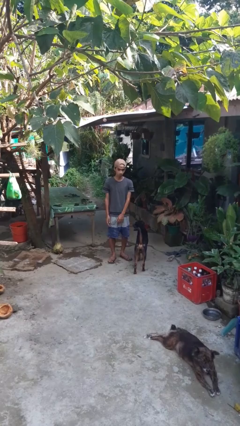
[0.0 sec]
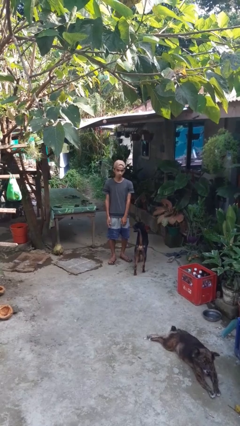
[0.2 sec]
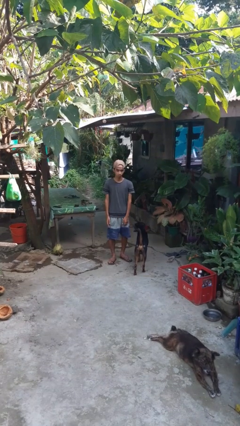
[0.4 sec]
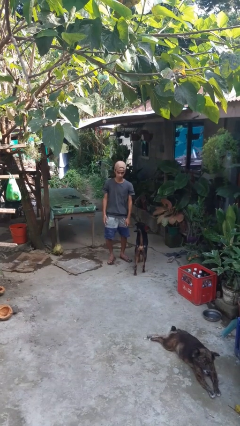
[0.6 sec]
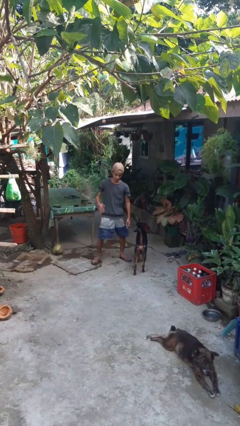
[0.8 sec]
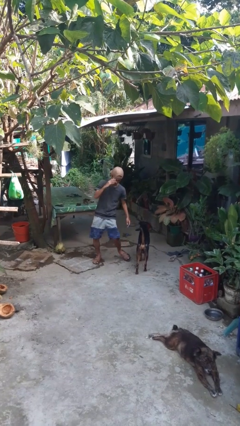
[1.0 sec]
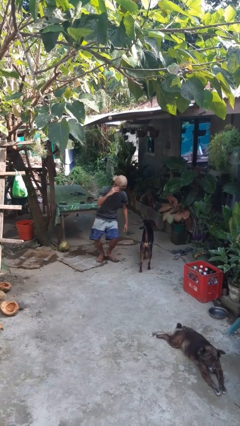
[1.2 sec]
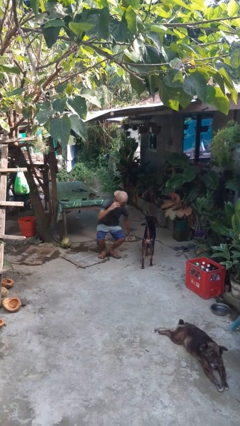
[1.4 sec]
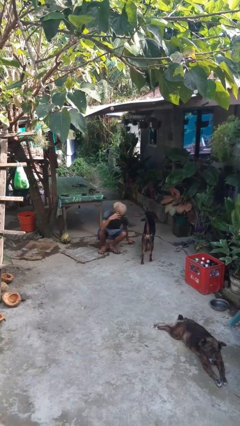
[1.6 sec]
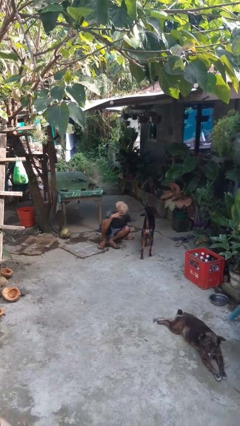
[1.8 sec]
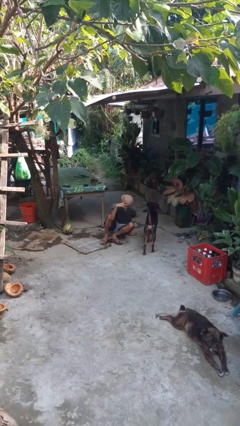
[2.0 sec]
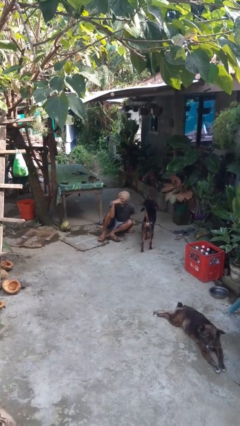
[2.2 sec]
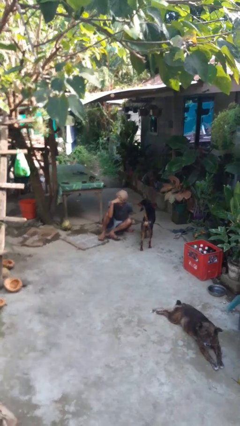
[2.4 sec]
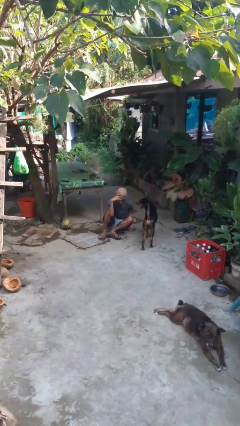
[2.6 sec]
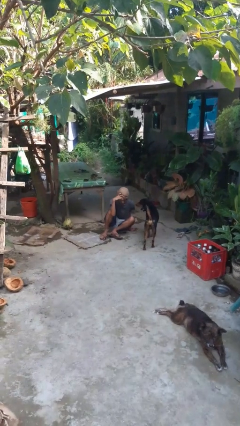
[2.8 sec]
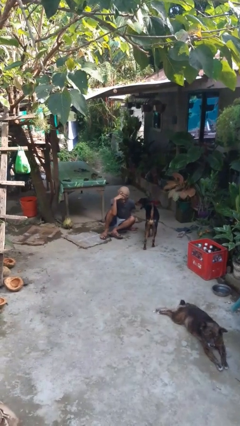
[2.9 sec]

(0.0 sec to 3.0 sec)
person falls while standing

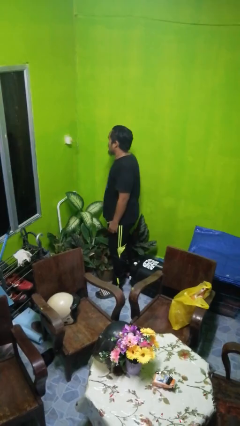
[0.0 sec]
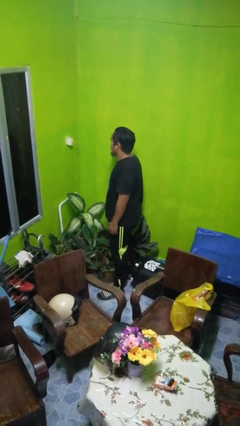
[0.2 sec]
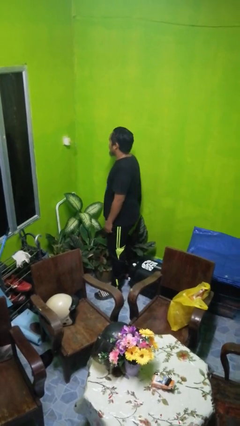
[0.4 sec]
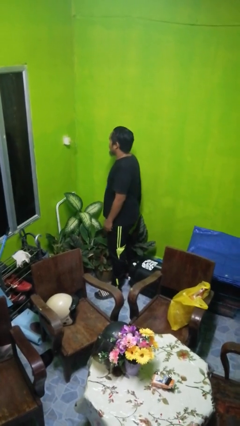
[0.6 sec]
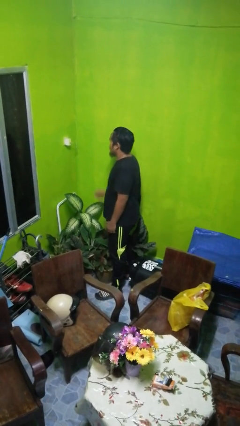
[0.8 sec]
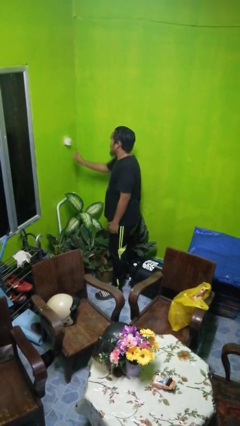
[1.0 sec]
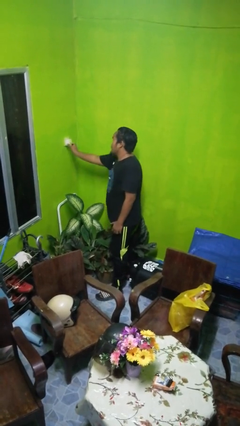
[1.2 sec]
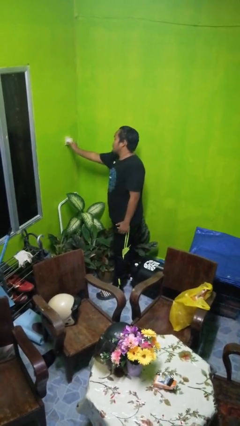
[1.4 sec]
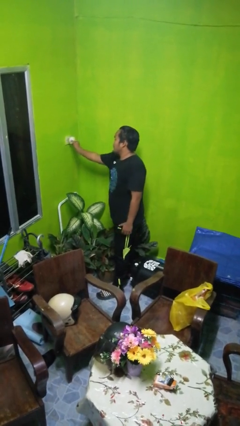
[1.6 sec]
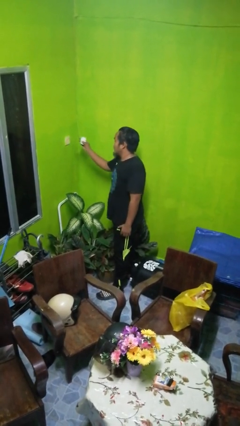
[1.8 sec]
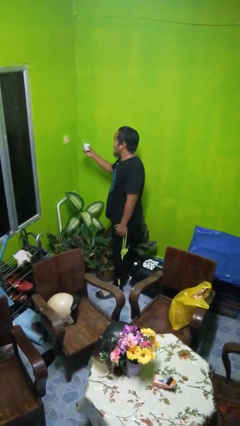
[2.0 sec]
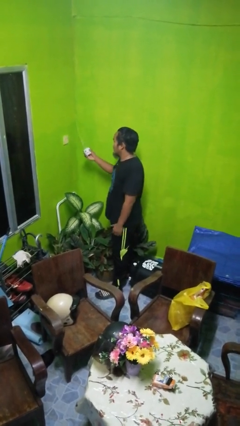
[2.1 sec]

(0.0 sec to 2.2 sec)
person unplugs from electrical socket

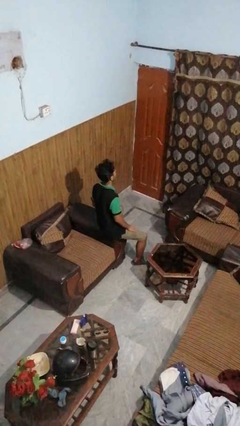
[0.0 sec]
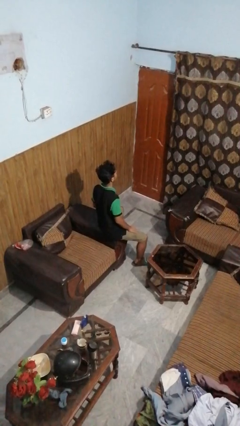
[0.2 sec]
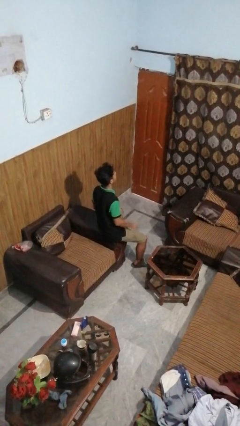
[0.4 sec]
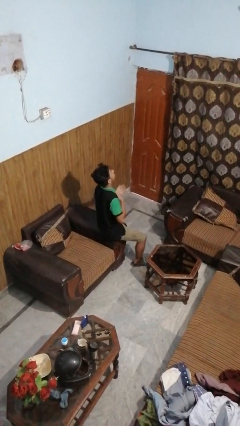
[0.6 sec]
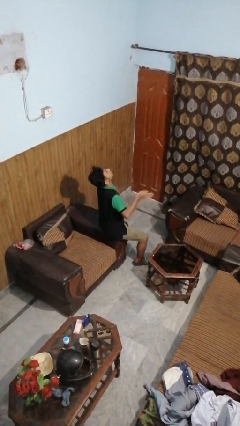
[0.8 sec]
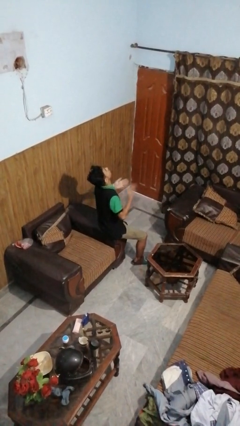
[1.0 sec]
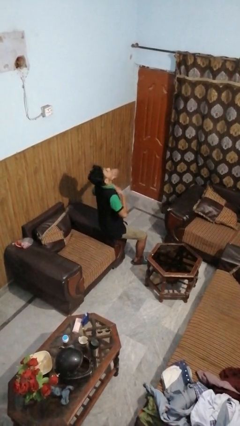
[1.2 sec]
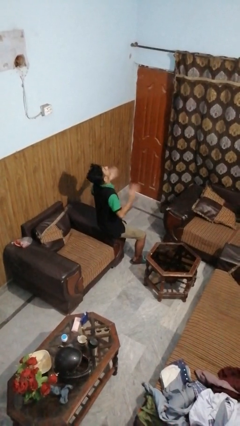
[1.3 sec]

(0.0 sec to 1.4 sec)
person drums on chest

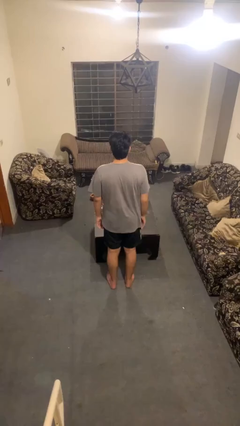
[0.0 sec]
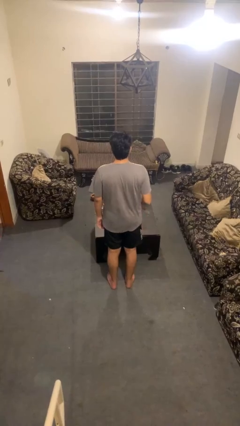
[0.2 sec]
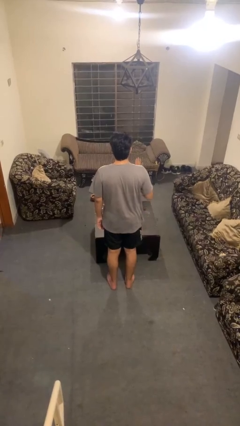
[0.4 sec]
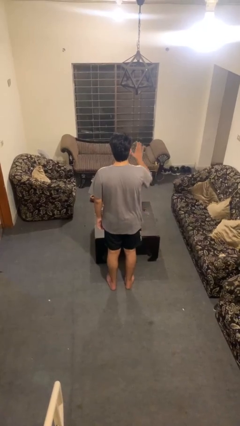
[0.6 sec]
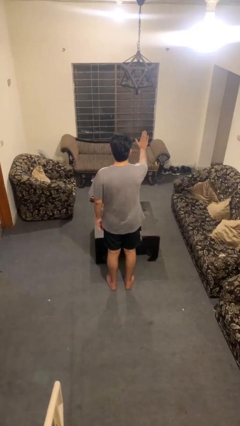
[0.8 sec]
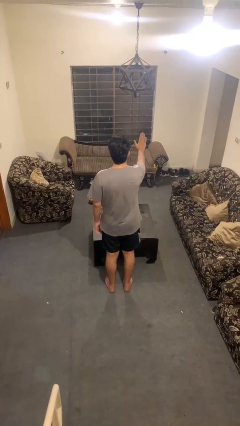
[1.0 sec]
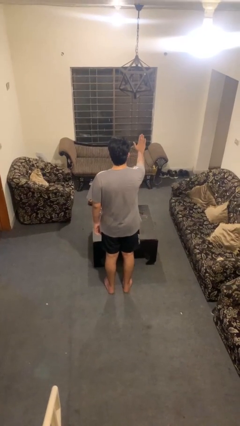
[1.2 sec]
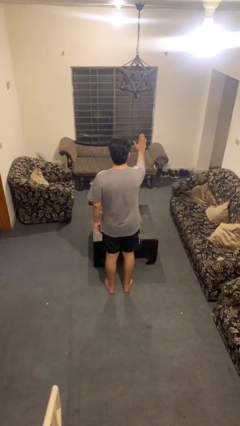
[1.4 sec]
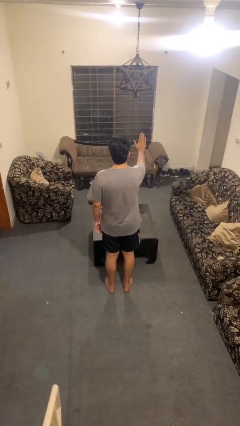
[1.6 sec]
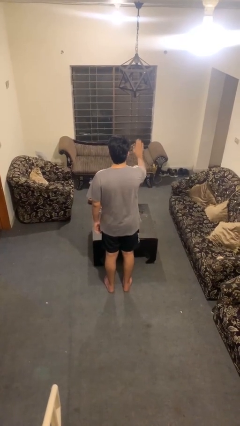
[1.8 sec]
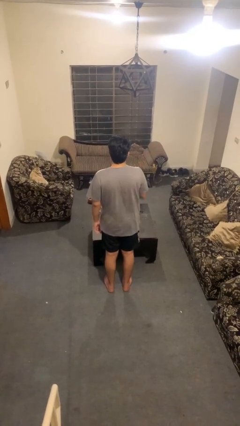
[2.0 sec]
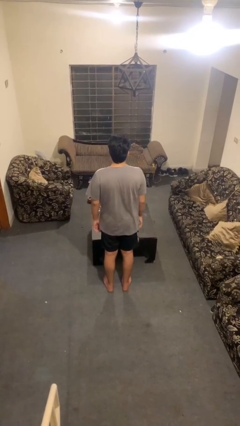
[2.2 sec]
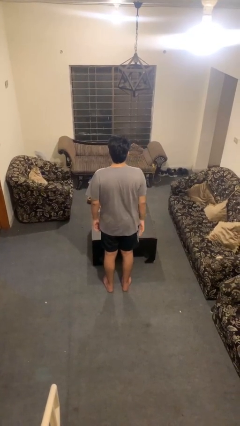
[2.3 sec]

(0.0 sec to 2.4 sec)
person gestures stop

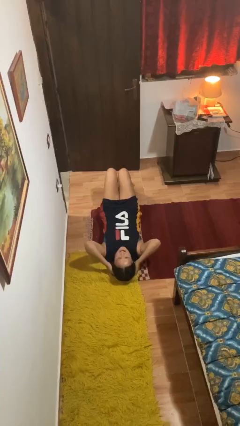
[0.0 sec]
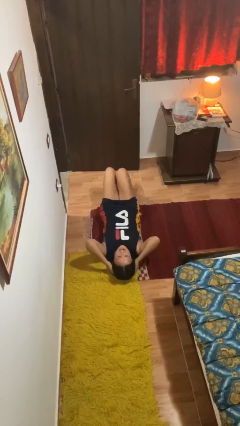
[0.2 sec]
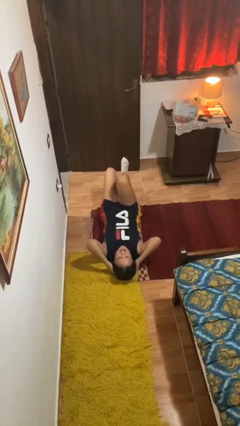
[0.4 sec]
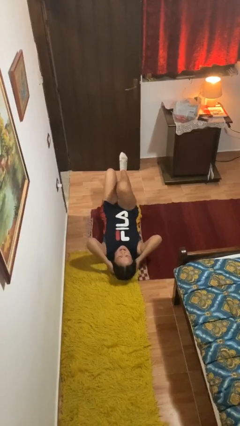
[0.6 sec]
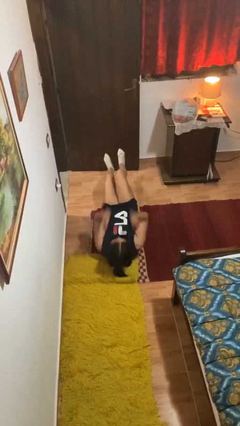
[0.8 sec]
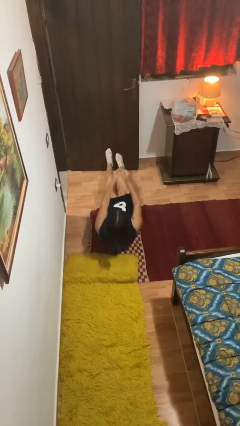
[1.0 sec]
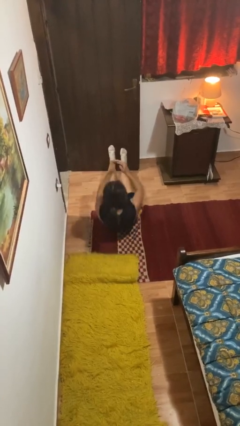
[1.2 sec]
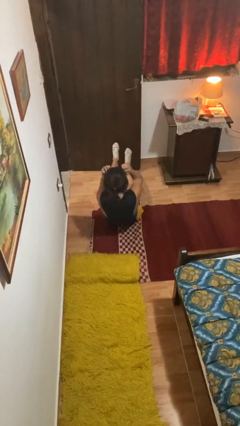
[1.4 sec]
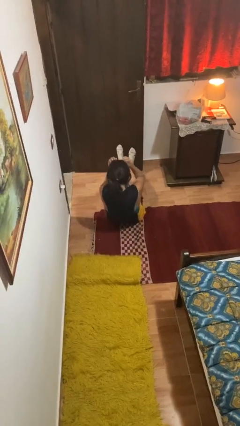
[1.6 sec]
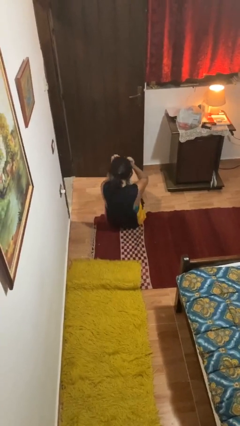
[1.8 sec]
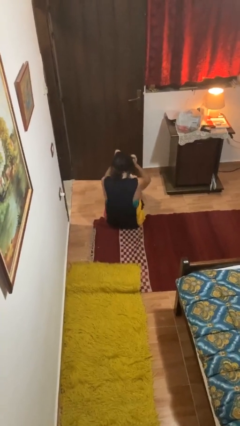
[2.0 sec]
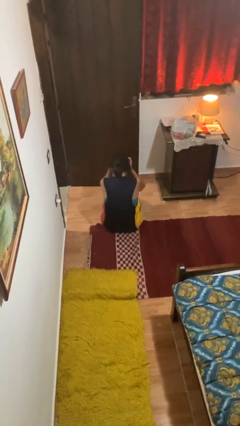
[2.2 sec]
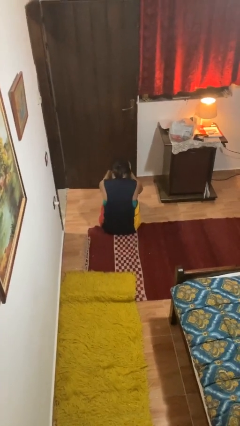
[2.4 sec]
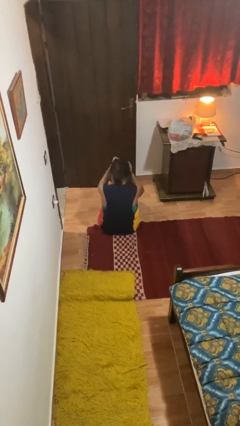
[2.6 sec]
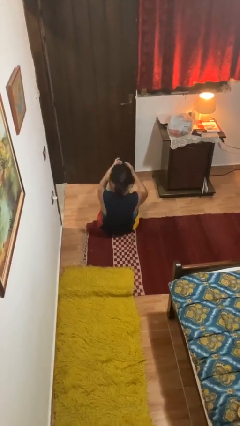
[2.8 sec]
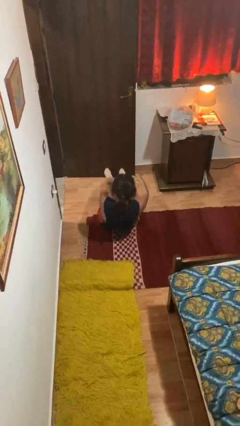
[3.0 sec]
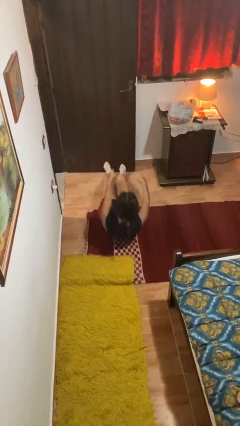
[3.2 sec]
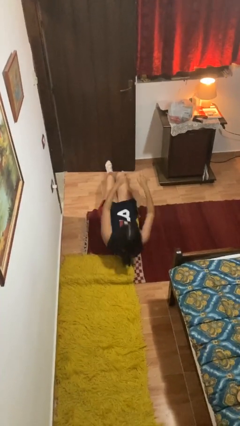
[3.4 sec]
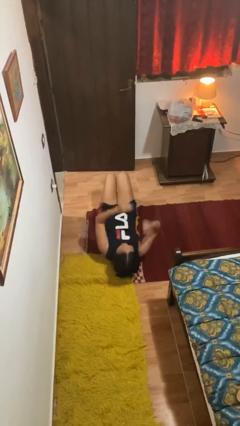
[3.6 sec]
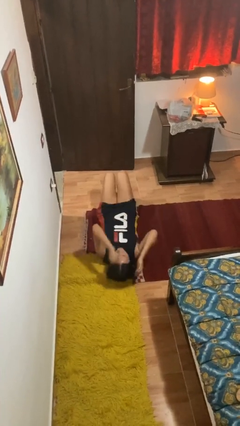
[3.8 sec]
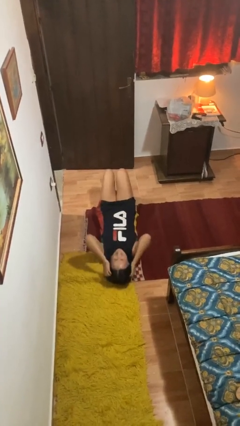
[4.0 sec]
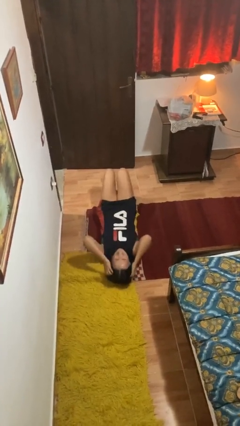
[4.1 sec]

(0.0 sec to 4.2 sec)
person exercises with situp

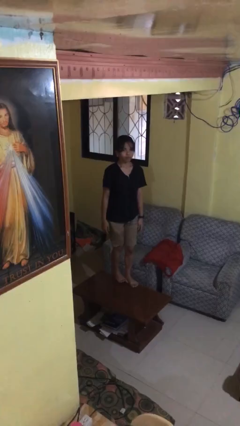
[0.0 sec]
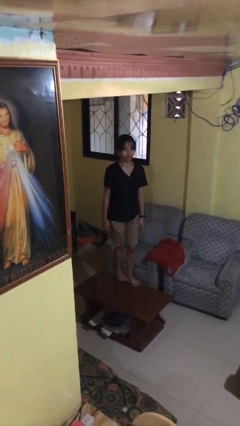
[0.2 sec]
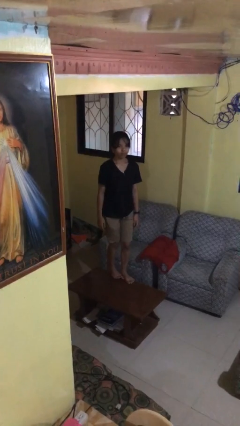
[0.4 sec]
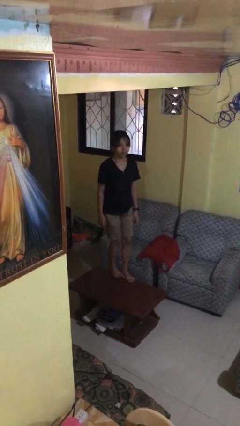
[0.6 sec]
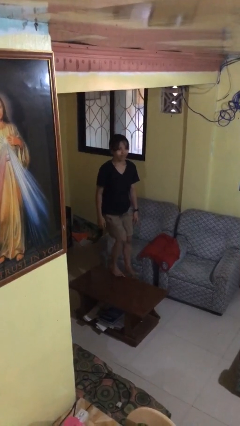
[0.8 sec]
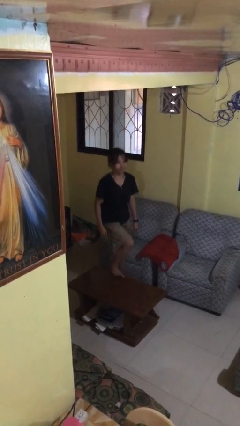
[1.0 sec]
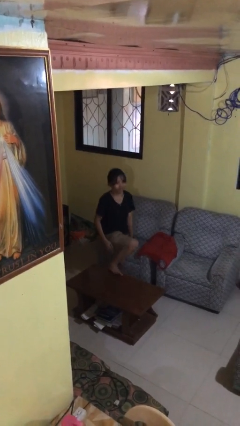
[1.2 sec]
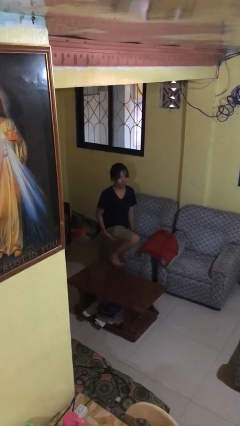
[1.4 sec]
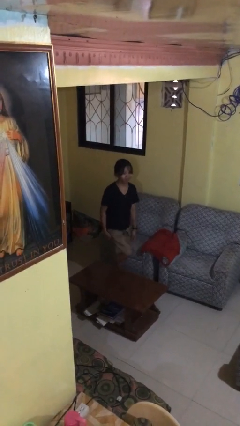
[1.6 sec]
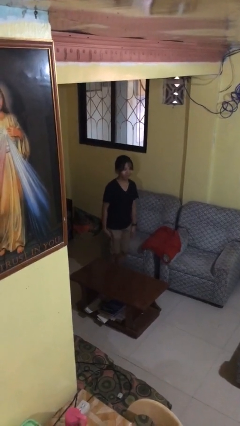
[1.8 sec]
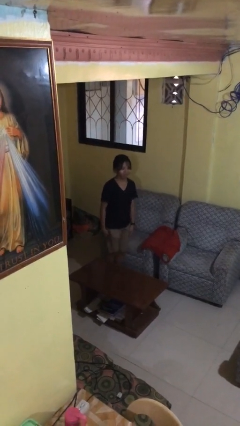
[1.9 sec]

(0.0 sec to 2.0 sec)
person climbs off table

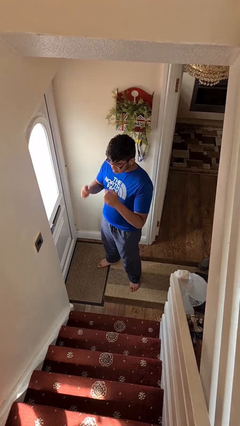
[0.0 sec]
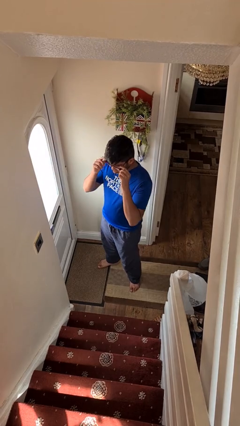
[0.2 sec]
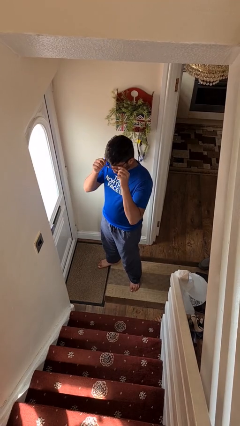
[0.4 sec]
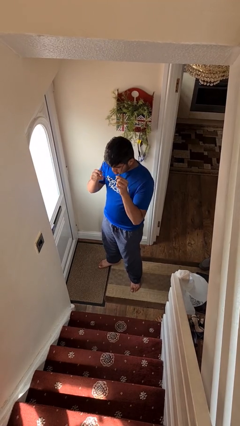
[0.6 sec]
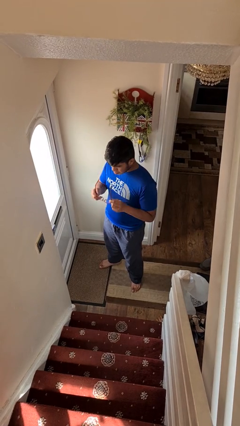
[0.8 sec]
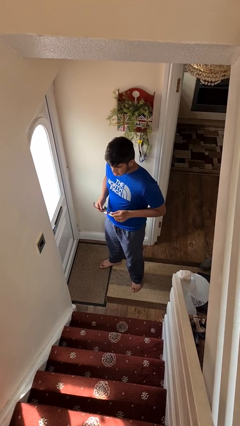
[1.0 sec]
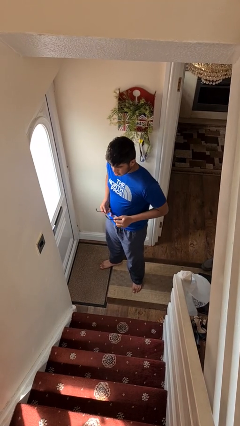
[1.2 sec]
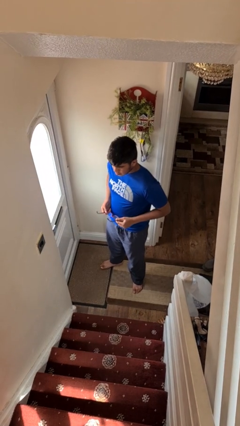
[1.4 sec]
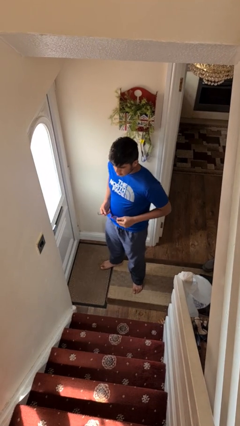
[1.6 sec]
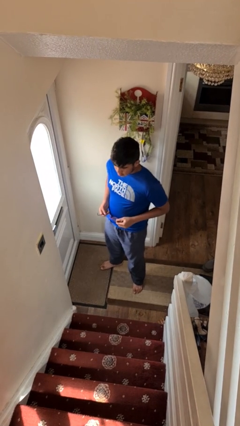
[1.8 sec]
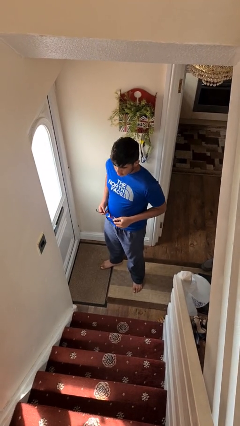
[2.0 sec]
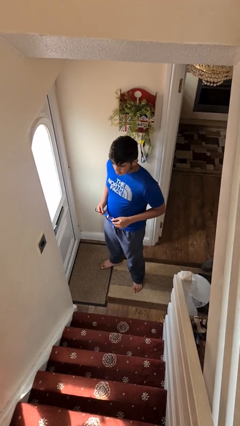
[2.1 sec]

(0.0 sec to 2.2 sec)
person takes off glasses
